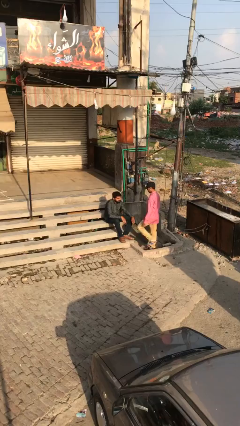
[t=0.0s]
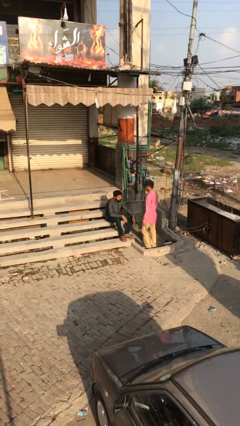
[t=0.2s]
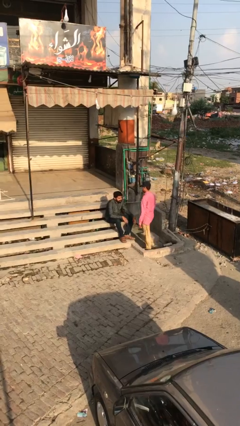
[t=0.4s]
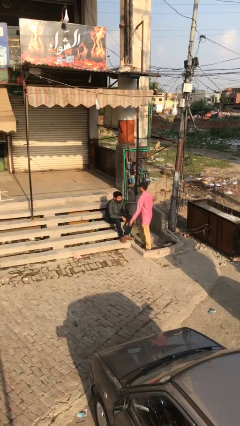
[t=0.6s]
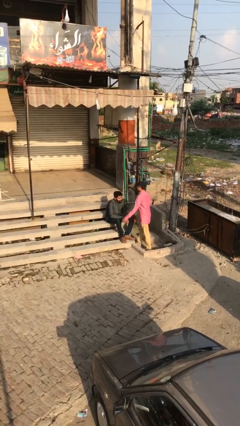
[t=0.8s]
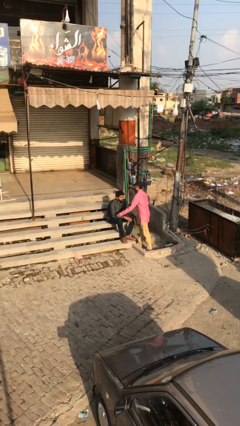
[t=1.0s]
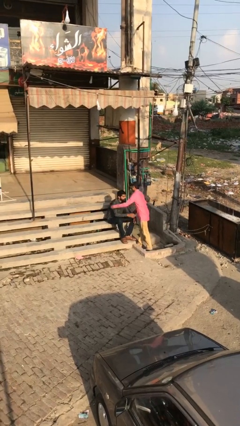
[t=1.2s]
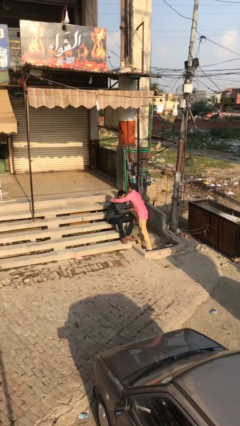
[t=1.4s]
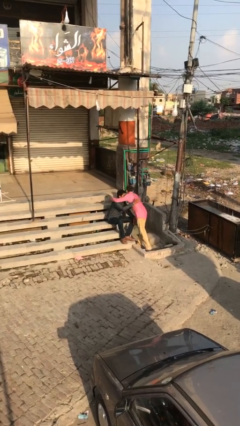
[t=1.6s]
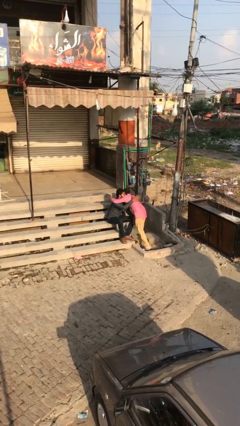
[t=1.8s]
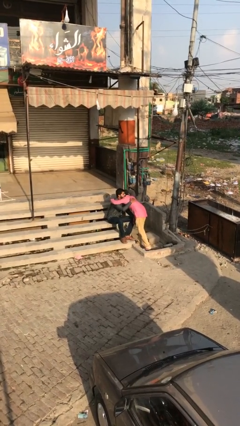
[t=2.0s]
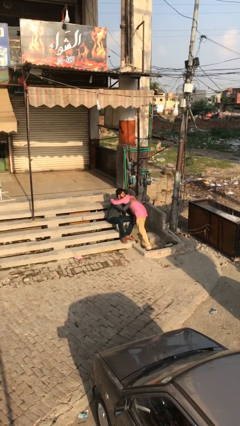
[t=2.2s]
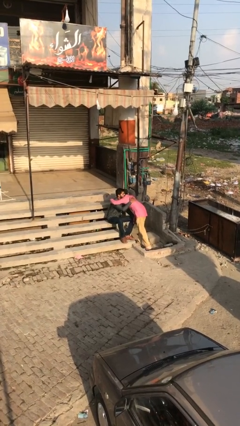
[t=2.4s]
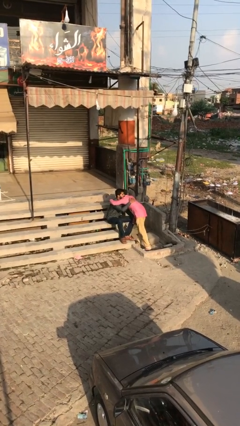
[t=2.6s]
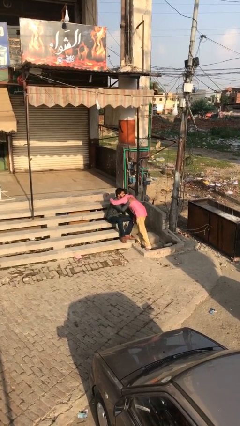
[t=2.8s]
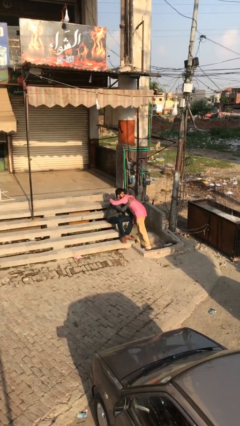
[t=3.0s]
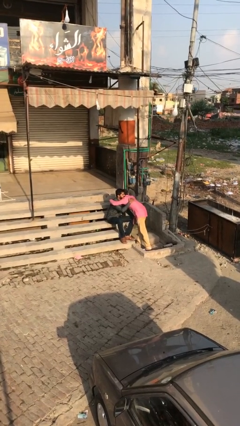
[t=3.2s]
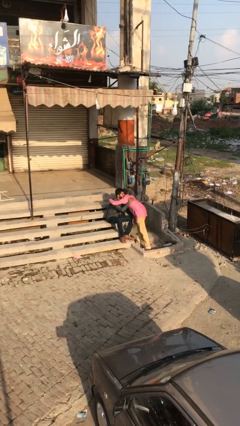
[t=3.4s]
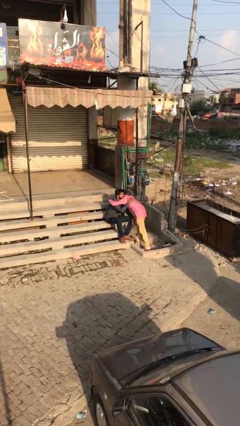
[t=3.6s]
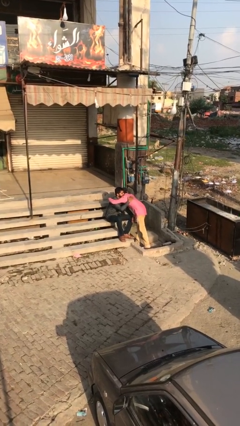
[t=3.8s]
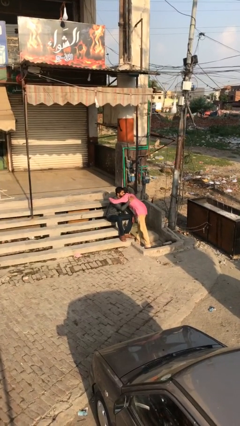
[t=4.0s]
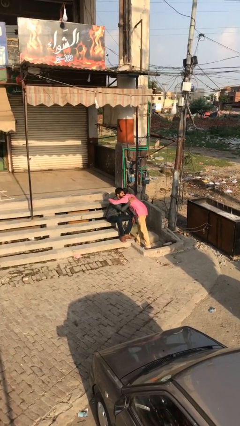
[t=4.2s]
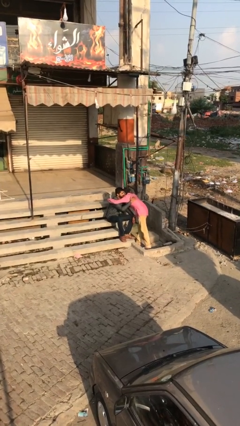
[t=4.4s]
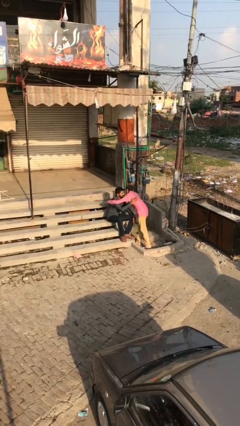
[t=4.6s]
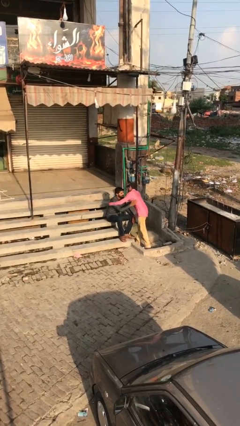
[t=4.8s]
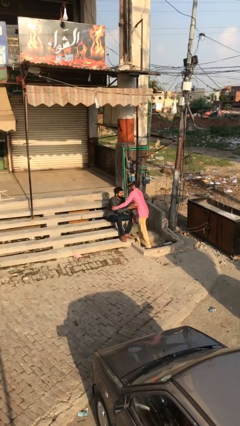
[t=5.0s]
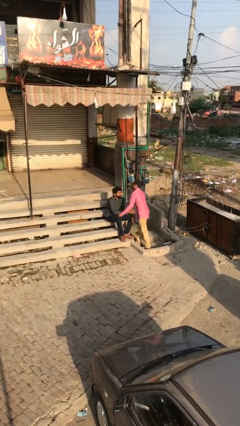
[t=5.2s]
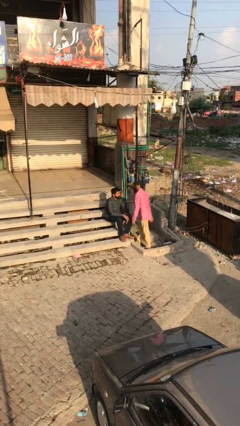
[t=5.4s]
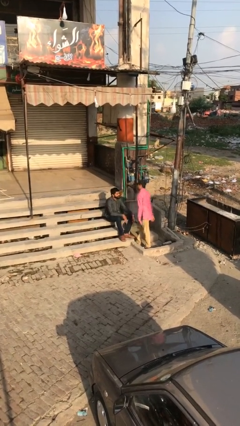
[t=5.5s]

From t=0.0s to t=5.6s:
person embraces person

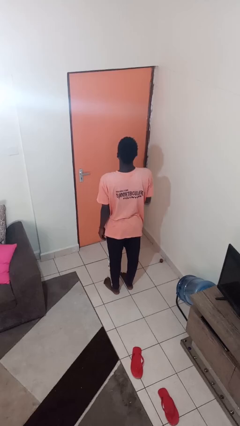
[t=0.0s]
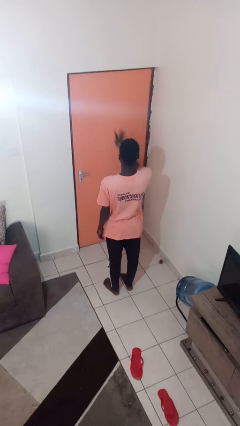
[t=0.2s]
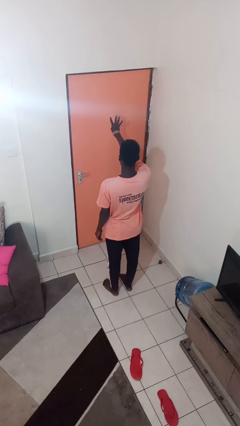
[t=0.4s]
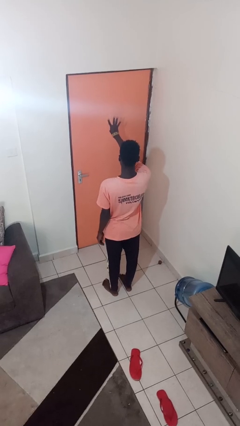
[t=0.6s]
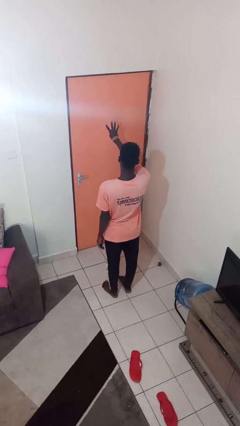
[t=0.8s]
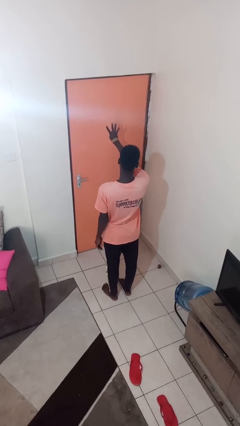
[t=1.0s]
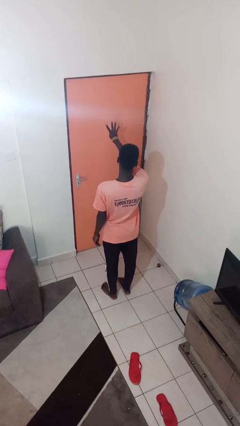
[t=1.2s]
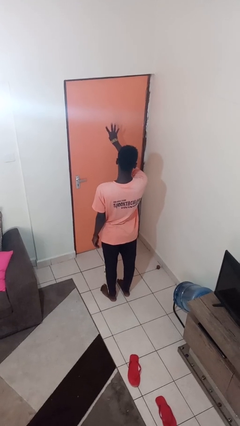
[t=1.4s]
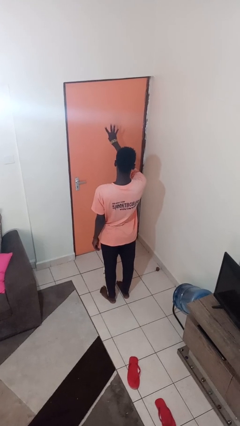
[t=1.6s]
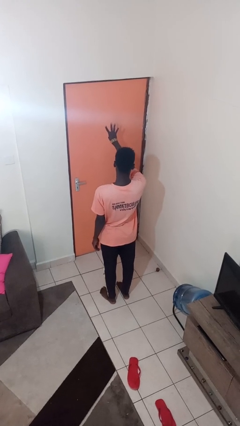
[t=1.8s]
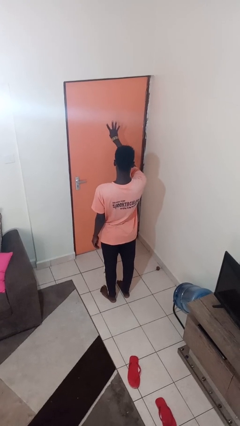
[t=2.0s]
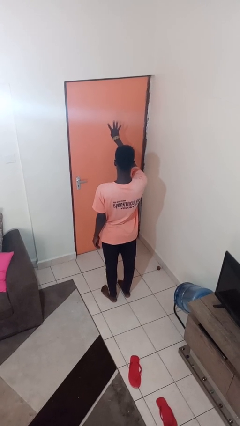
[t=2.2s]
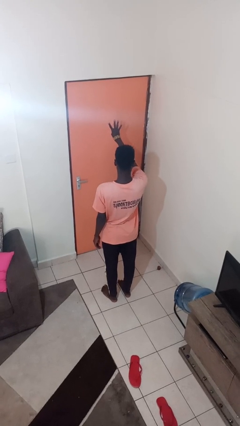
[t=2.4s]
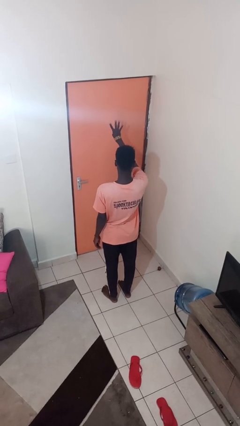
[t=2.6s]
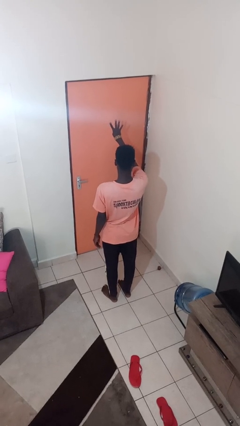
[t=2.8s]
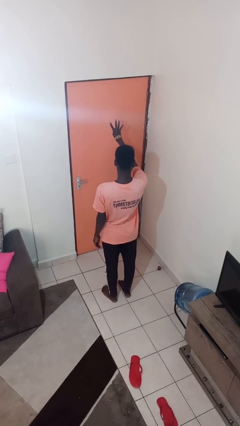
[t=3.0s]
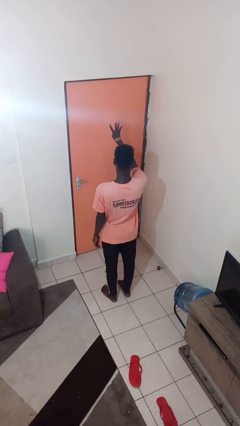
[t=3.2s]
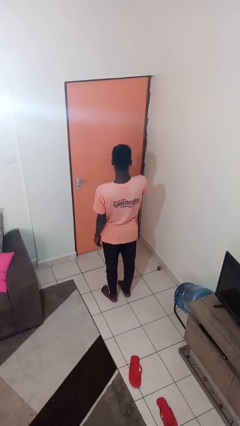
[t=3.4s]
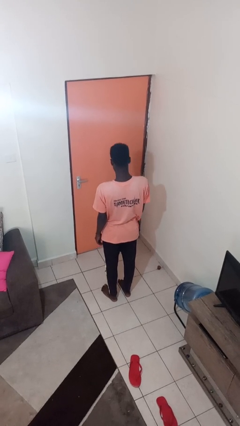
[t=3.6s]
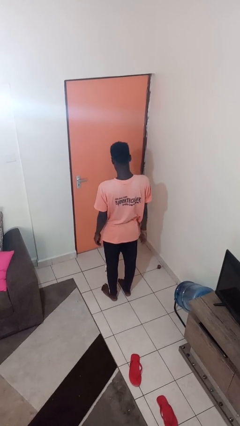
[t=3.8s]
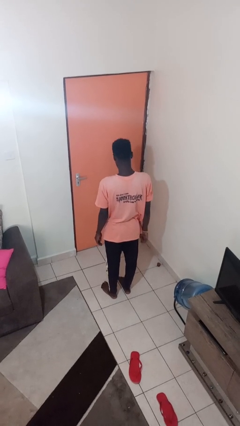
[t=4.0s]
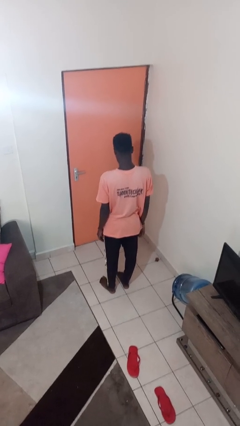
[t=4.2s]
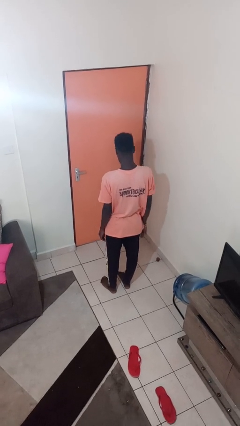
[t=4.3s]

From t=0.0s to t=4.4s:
person gestures number four

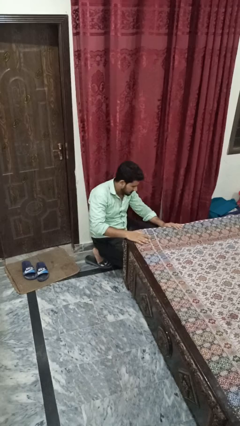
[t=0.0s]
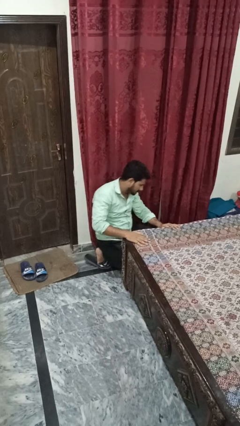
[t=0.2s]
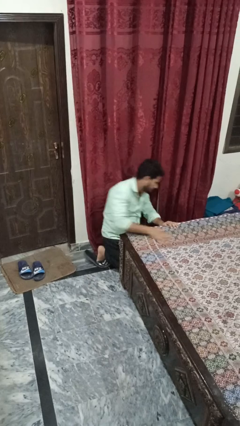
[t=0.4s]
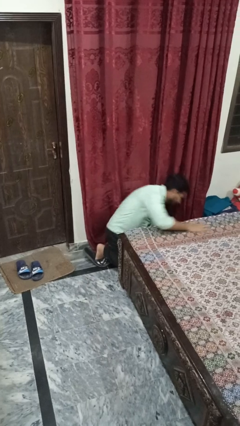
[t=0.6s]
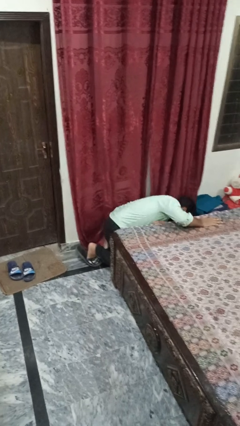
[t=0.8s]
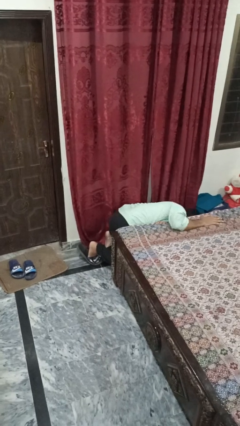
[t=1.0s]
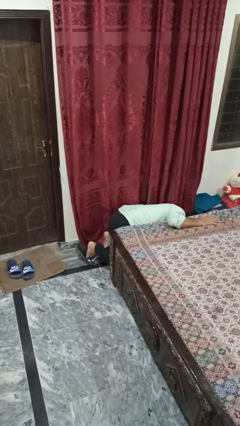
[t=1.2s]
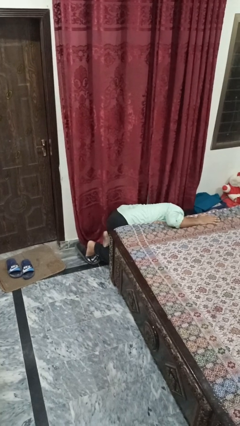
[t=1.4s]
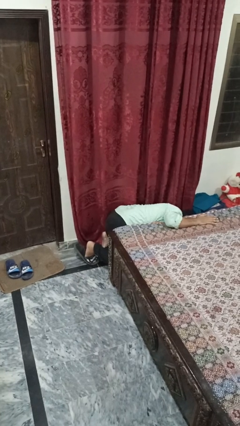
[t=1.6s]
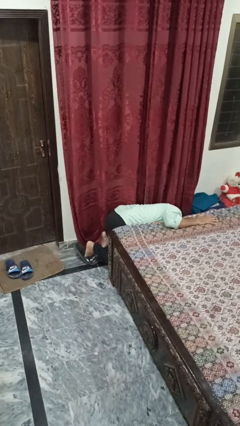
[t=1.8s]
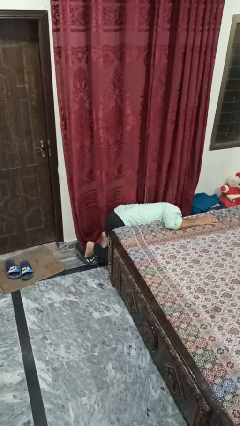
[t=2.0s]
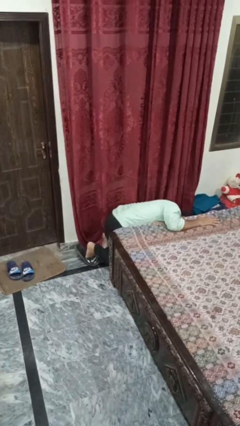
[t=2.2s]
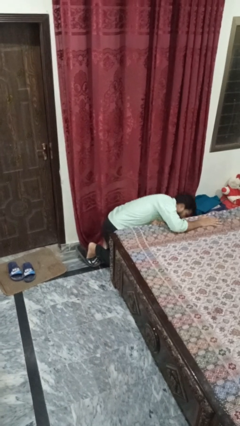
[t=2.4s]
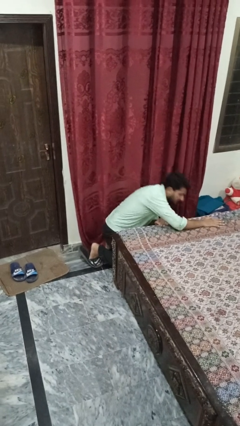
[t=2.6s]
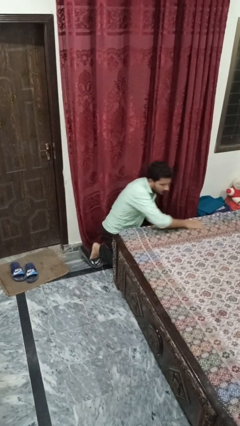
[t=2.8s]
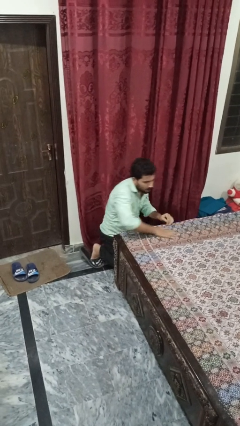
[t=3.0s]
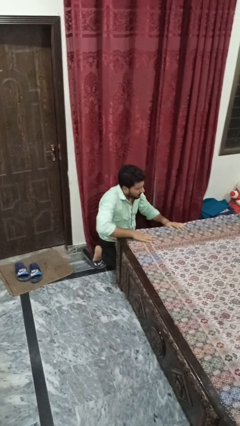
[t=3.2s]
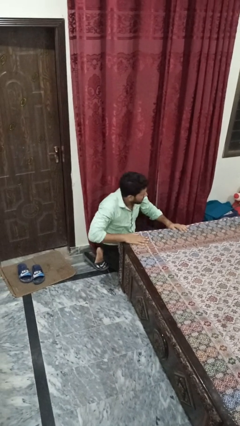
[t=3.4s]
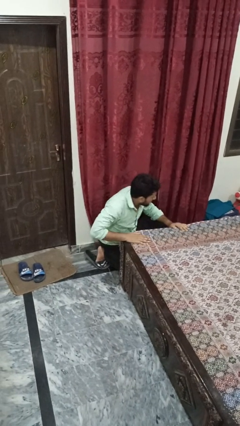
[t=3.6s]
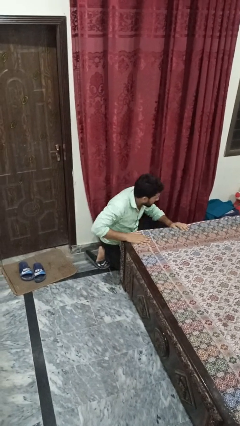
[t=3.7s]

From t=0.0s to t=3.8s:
person searches under bed

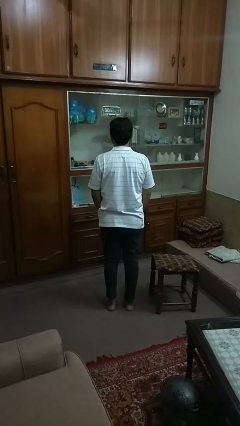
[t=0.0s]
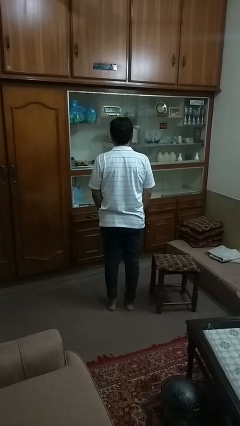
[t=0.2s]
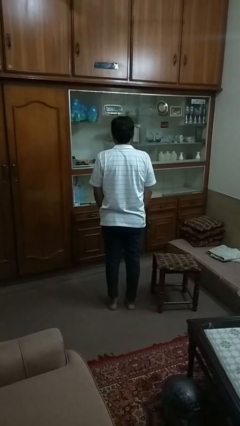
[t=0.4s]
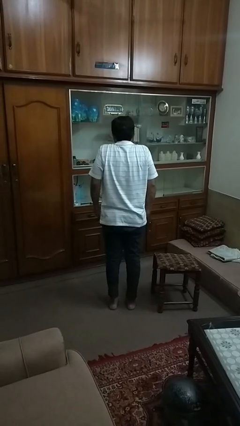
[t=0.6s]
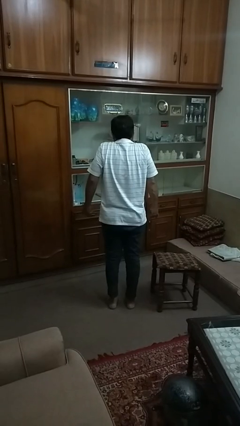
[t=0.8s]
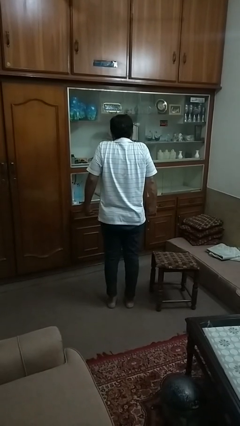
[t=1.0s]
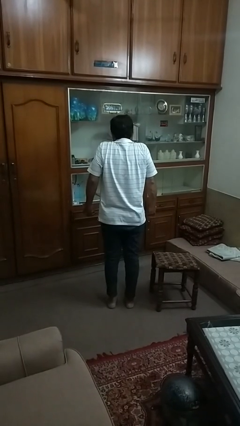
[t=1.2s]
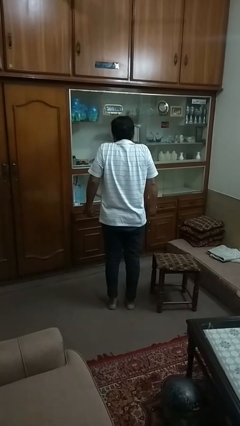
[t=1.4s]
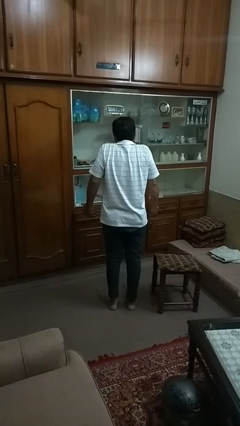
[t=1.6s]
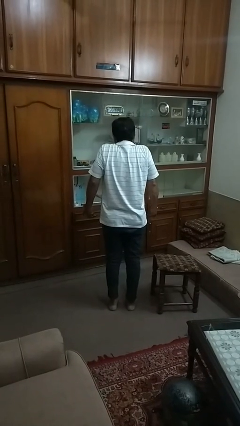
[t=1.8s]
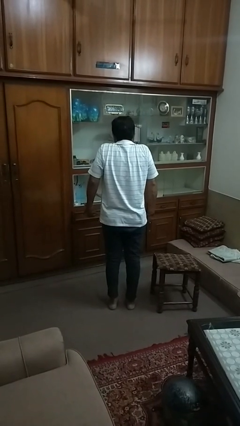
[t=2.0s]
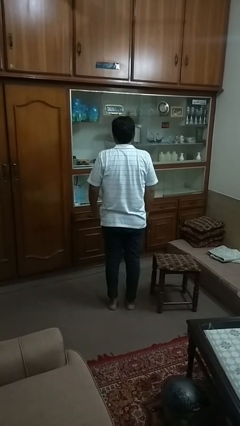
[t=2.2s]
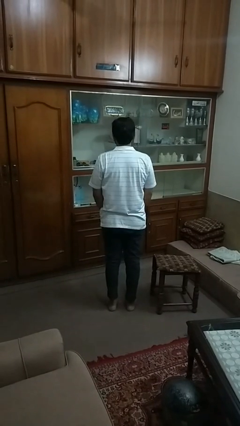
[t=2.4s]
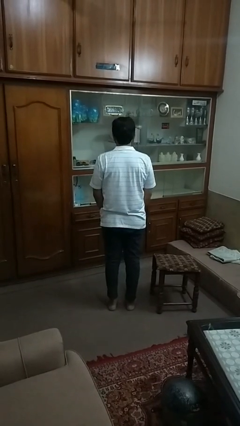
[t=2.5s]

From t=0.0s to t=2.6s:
person shrugs

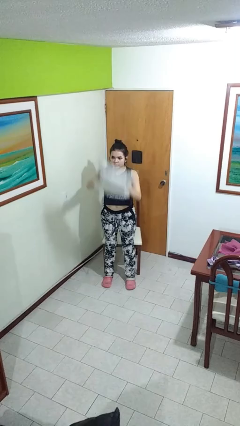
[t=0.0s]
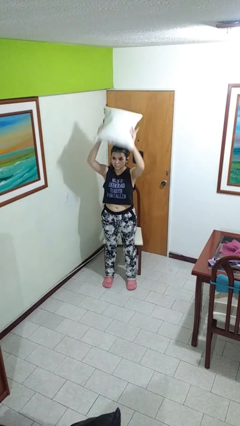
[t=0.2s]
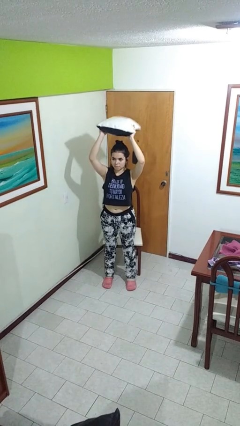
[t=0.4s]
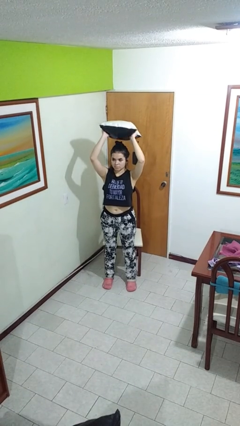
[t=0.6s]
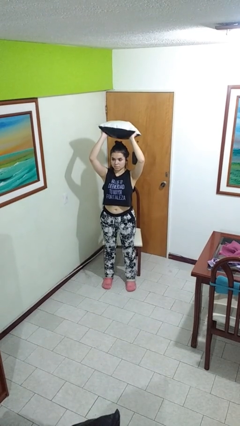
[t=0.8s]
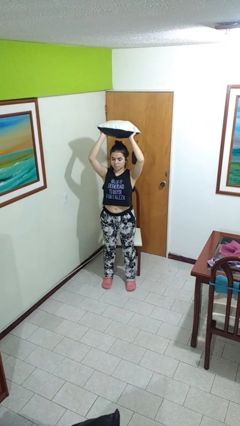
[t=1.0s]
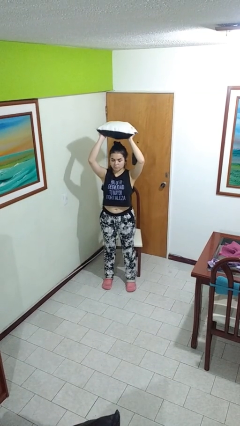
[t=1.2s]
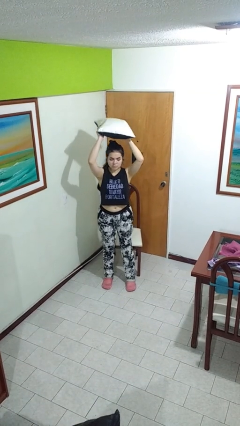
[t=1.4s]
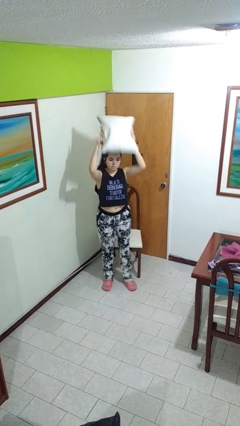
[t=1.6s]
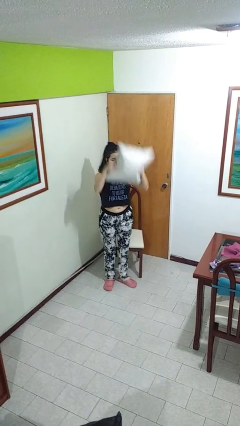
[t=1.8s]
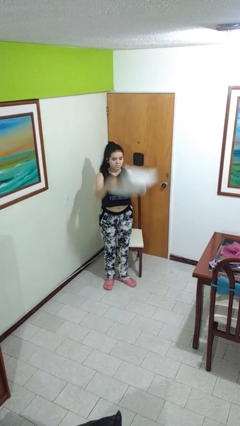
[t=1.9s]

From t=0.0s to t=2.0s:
person holds object above head
